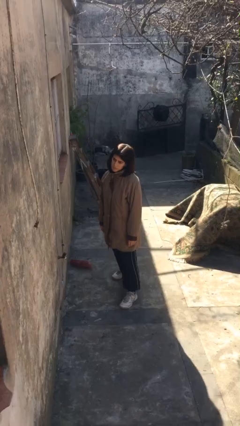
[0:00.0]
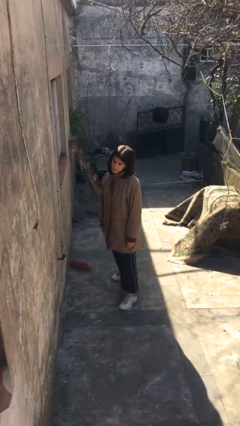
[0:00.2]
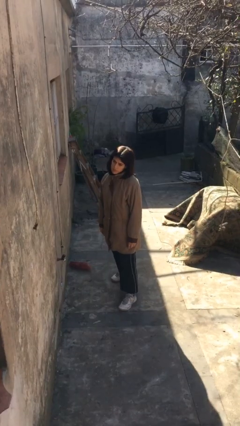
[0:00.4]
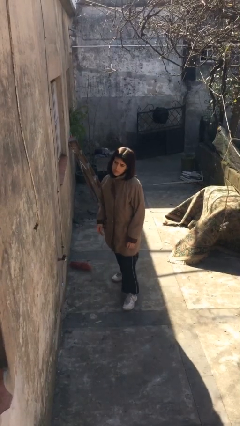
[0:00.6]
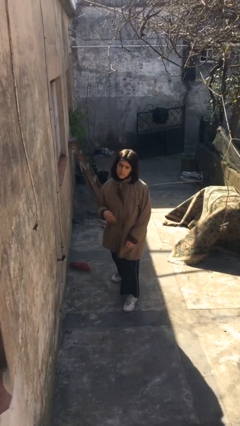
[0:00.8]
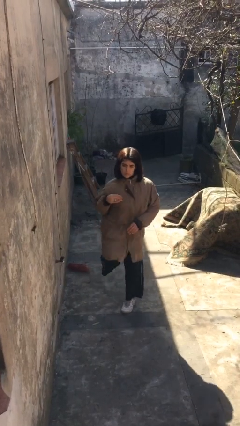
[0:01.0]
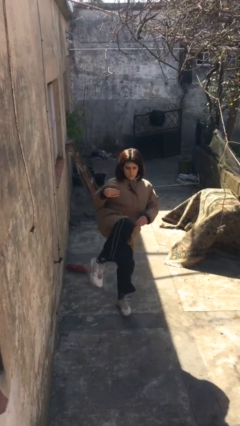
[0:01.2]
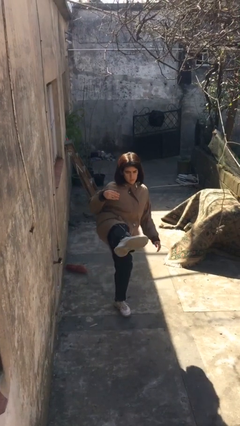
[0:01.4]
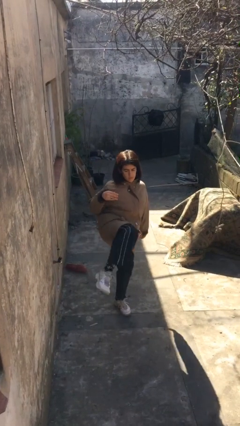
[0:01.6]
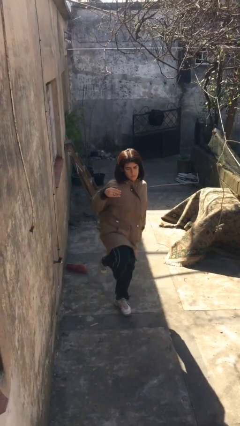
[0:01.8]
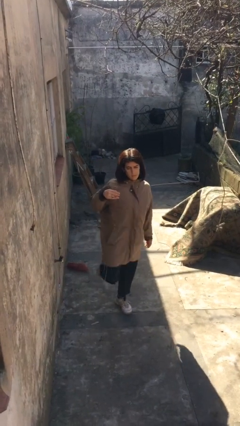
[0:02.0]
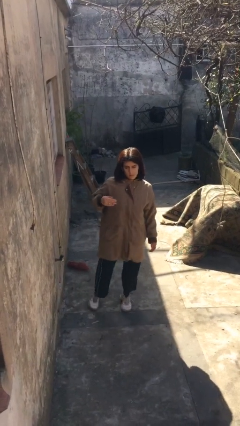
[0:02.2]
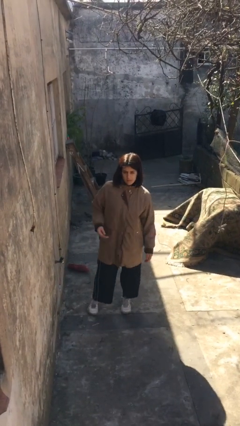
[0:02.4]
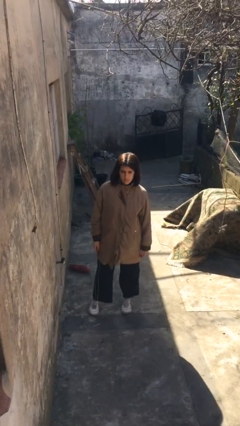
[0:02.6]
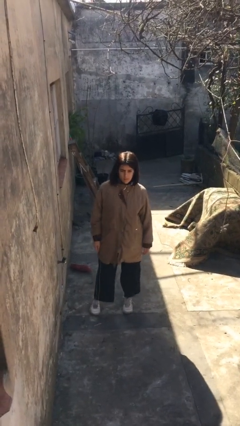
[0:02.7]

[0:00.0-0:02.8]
person karate kicks

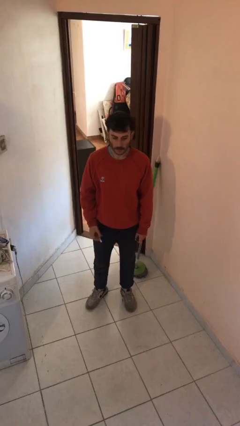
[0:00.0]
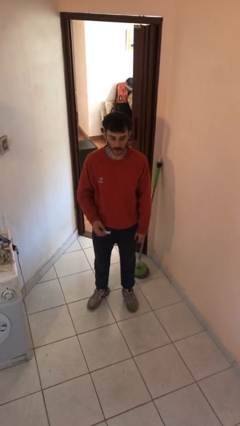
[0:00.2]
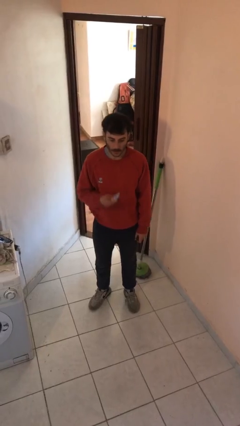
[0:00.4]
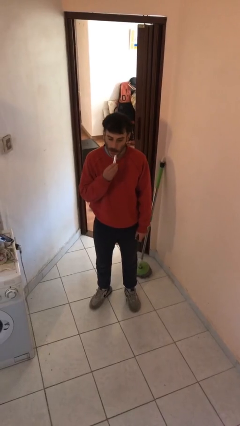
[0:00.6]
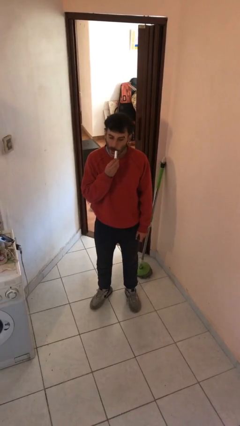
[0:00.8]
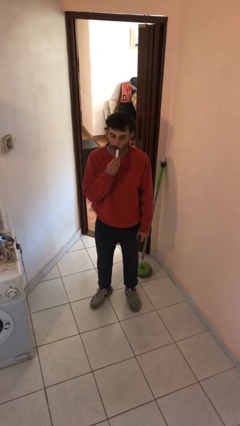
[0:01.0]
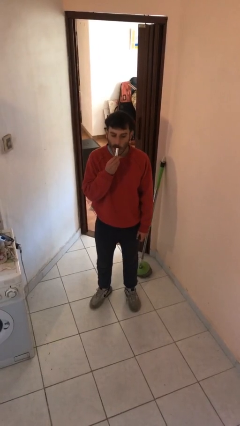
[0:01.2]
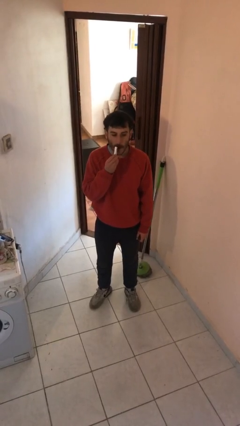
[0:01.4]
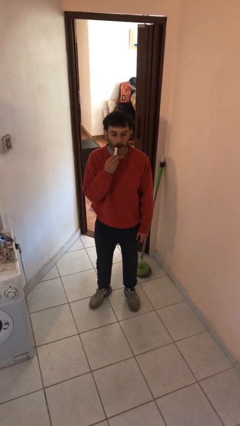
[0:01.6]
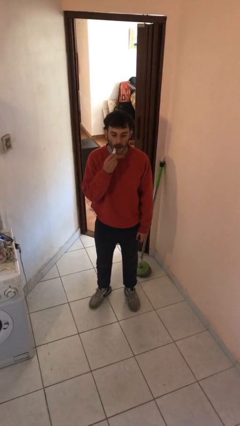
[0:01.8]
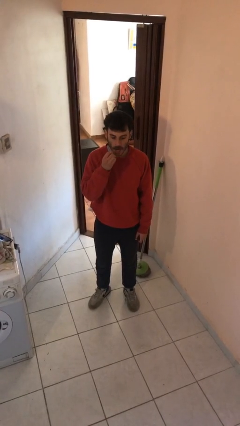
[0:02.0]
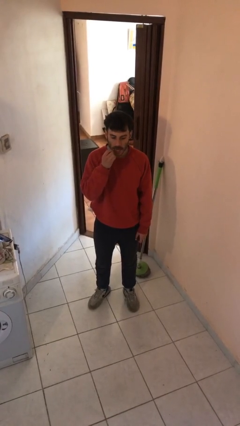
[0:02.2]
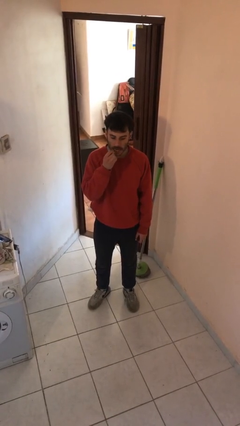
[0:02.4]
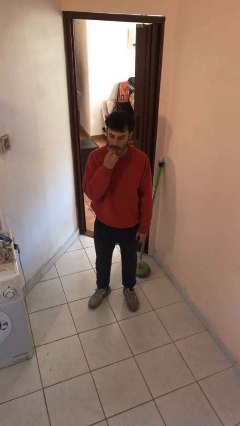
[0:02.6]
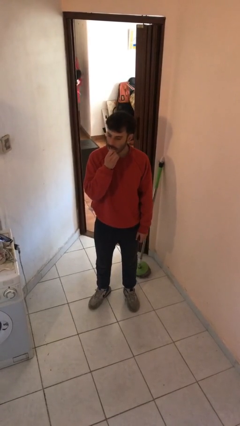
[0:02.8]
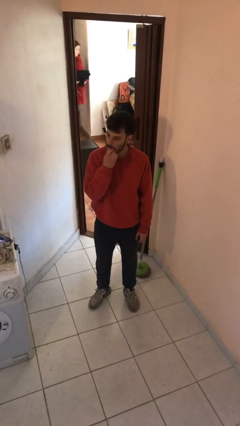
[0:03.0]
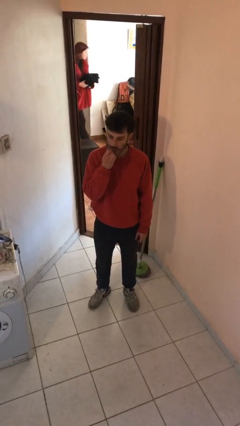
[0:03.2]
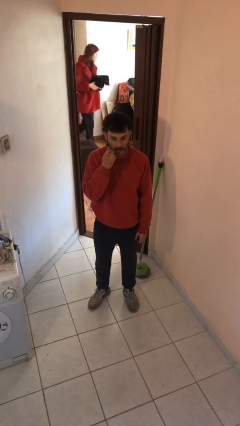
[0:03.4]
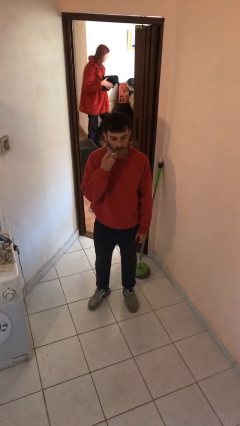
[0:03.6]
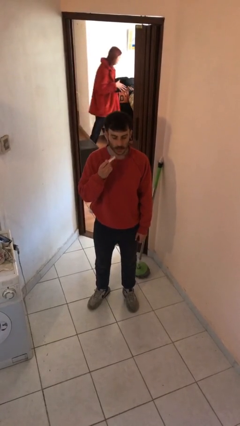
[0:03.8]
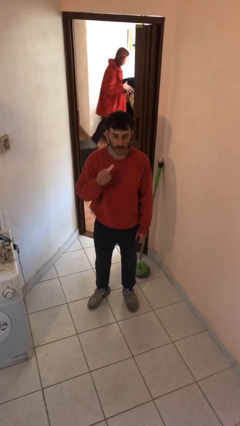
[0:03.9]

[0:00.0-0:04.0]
person applies lip makeup

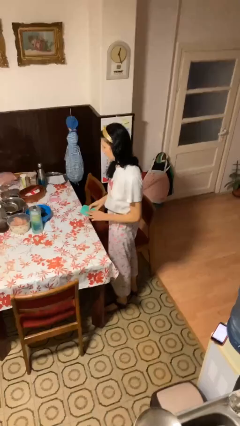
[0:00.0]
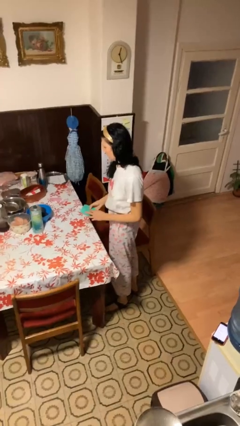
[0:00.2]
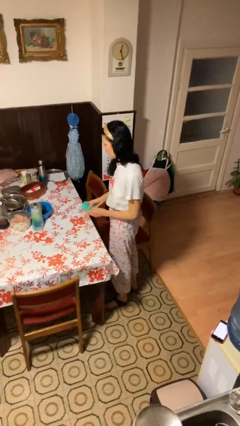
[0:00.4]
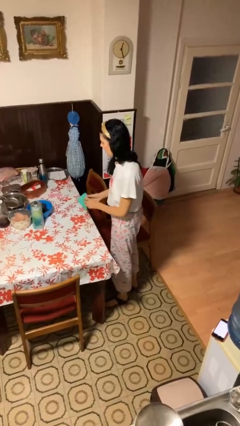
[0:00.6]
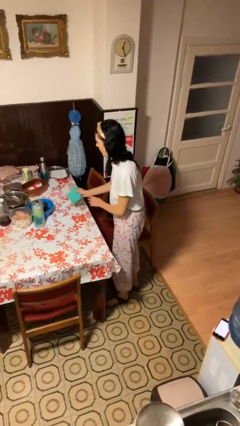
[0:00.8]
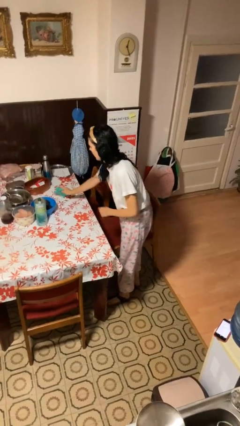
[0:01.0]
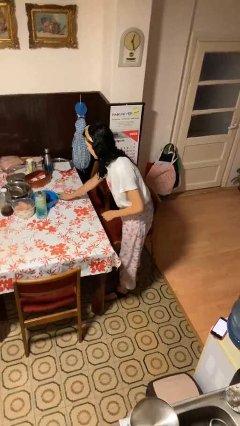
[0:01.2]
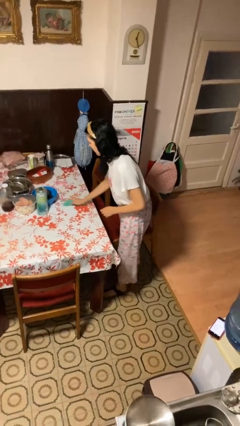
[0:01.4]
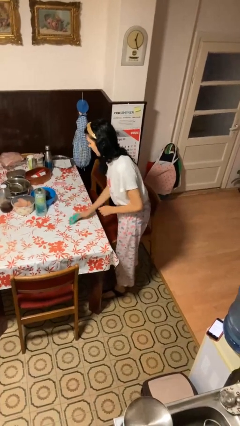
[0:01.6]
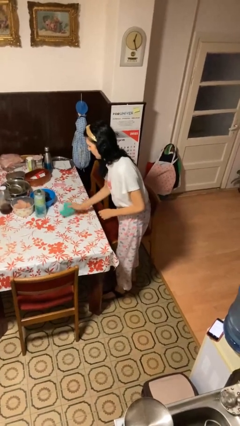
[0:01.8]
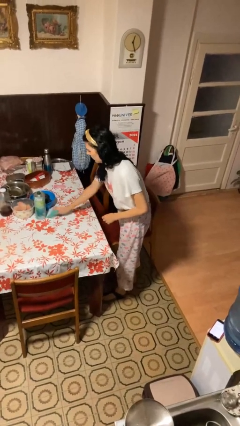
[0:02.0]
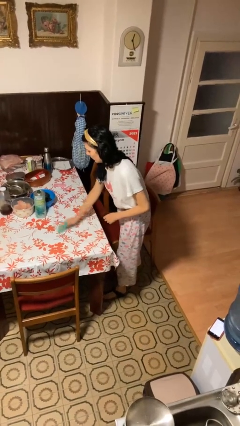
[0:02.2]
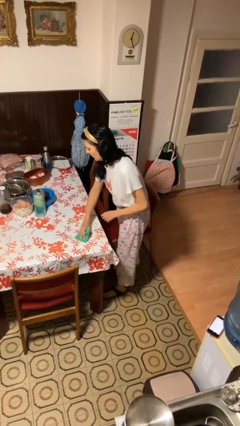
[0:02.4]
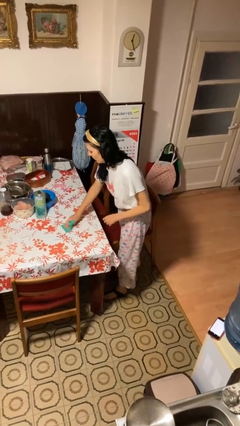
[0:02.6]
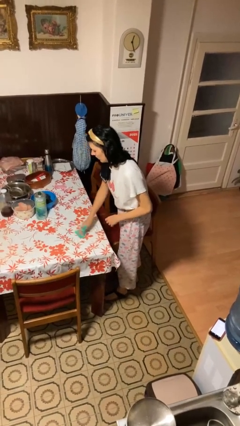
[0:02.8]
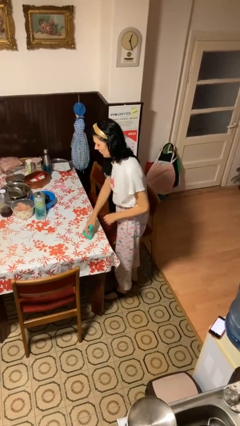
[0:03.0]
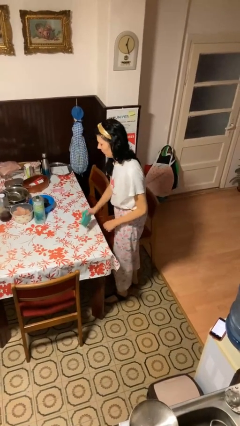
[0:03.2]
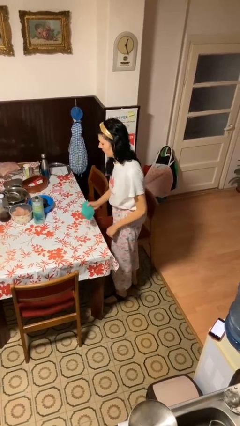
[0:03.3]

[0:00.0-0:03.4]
person cleans table with rag

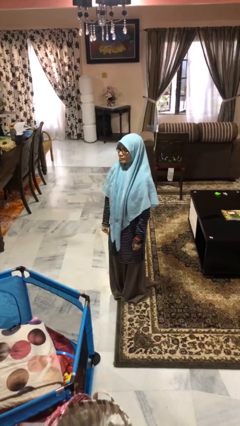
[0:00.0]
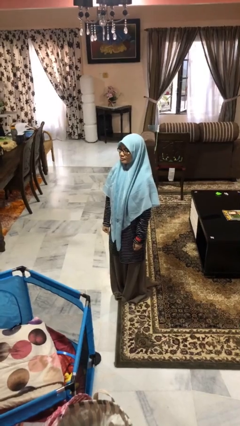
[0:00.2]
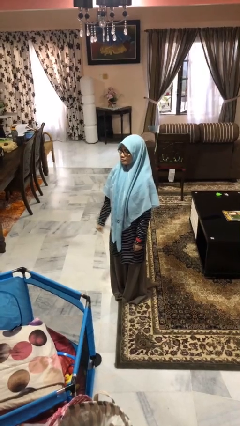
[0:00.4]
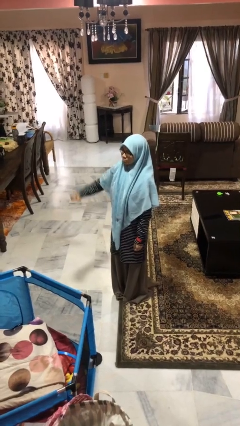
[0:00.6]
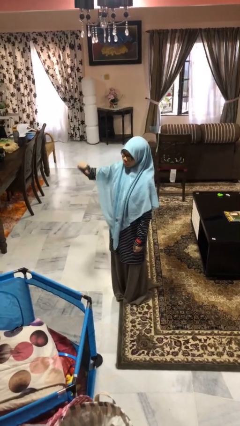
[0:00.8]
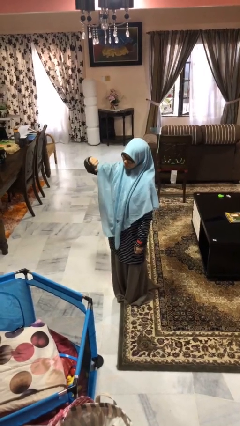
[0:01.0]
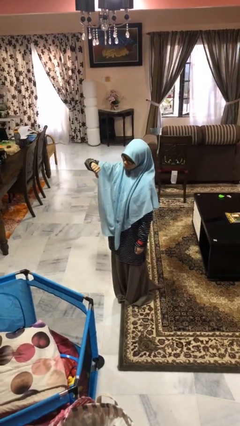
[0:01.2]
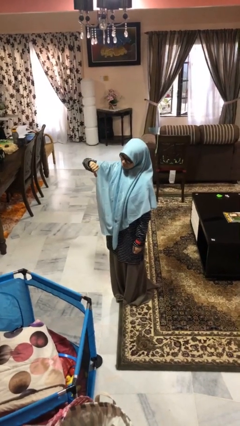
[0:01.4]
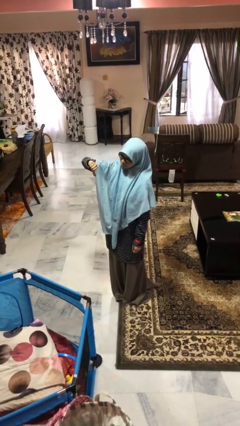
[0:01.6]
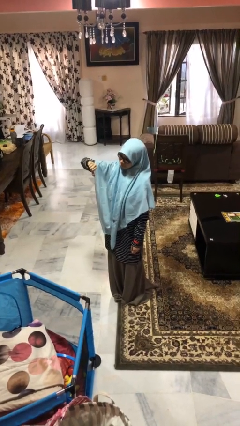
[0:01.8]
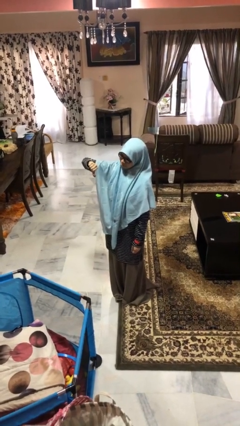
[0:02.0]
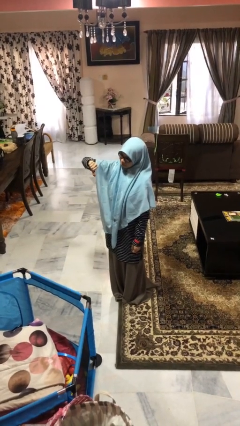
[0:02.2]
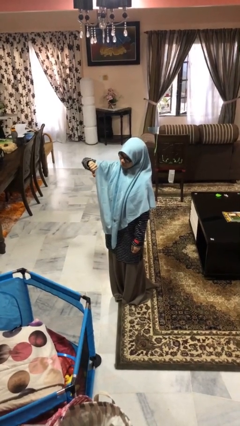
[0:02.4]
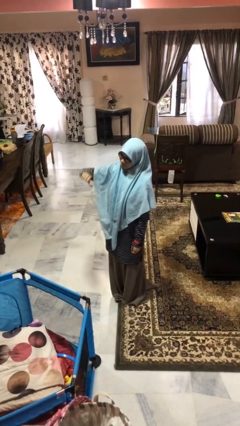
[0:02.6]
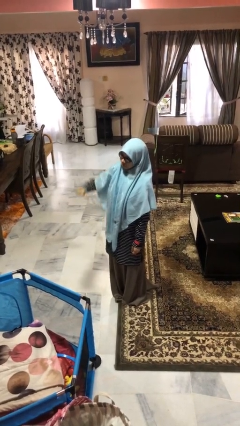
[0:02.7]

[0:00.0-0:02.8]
person gestures thumbs down

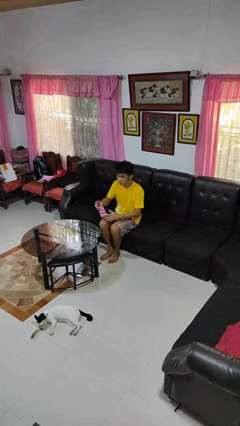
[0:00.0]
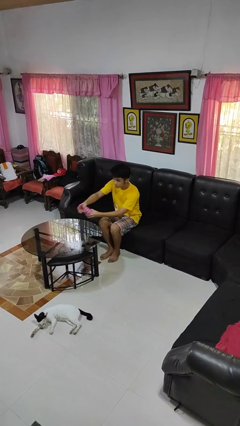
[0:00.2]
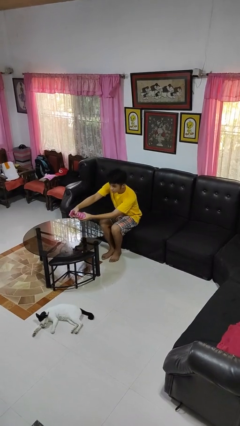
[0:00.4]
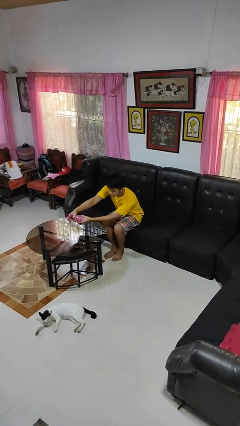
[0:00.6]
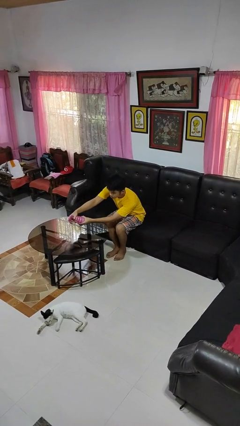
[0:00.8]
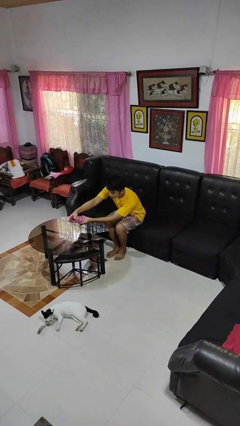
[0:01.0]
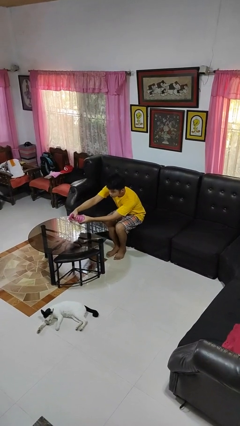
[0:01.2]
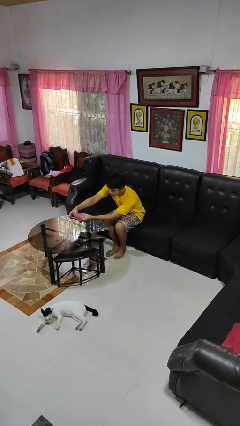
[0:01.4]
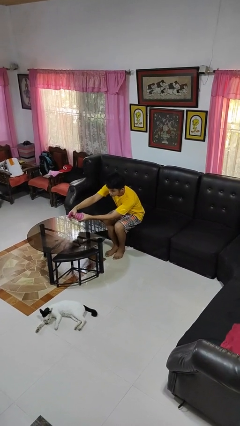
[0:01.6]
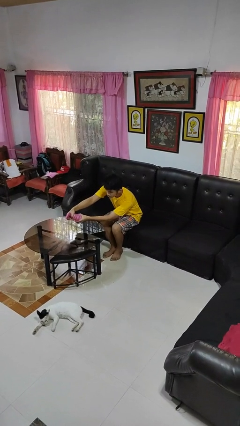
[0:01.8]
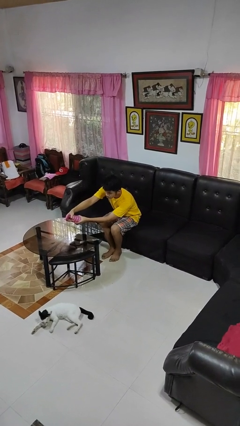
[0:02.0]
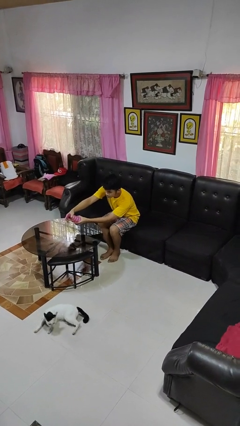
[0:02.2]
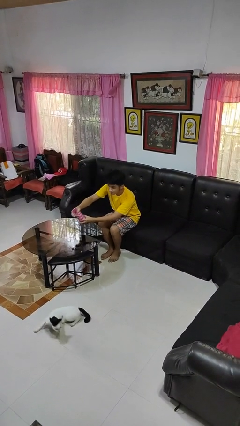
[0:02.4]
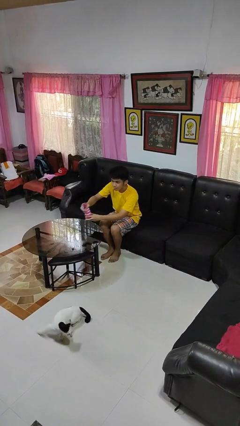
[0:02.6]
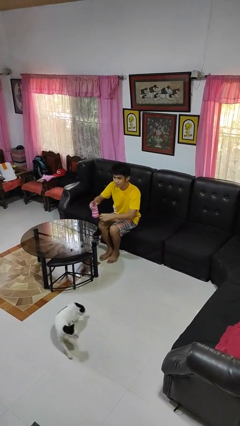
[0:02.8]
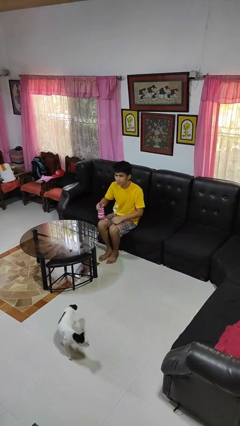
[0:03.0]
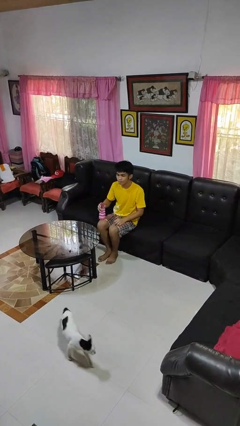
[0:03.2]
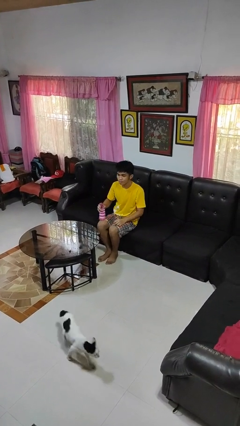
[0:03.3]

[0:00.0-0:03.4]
person sprays from bottle

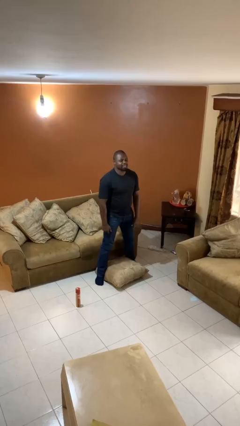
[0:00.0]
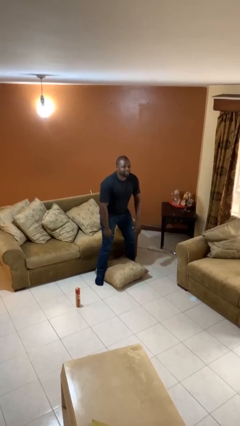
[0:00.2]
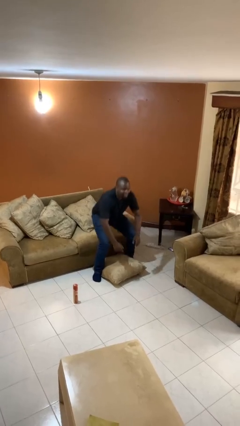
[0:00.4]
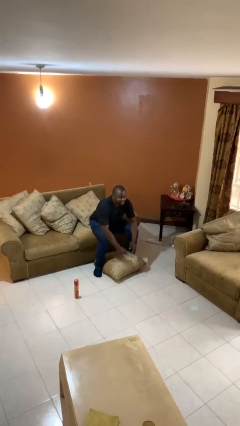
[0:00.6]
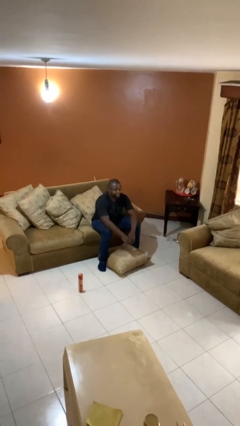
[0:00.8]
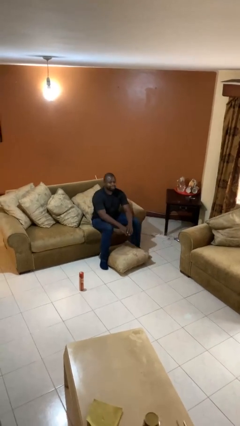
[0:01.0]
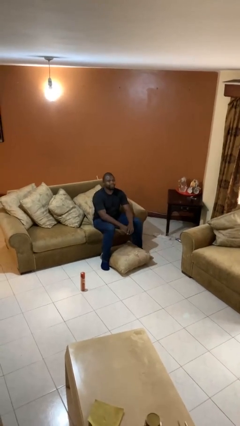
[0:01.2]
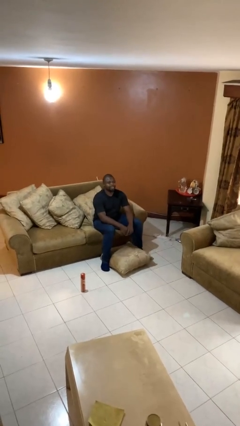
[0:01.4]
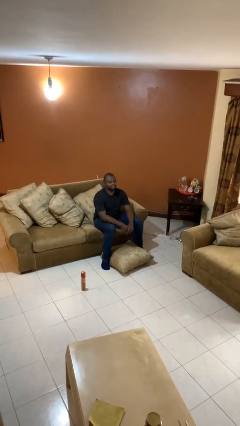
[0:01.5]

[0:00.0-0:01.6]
person sits down
